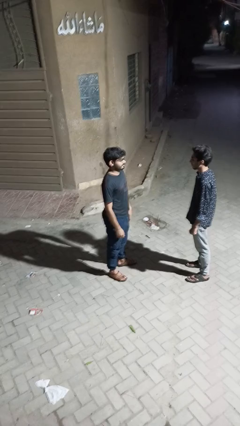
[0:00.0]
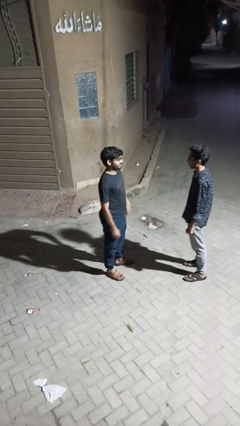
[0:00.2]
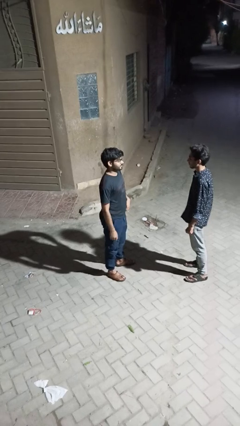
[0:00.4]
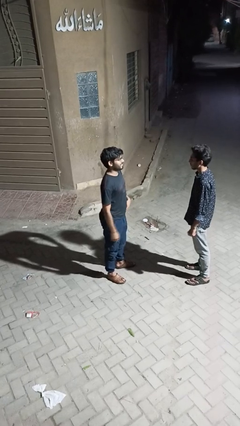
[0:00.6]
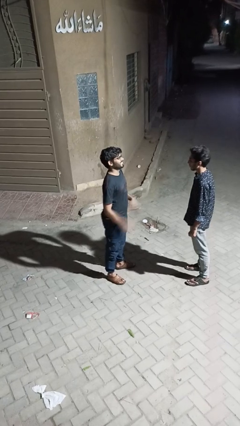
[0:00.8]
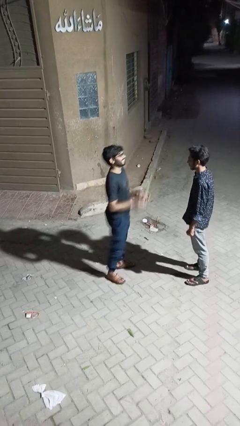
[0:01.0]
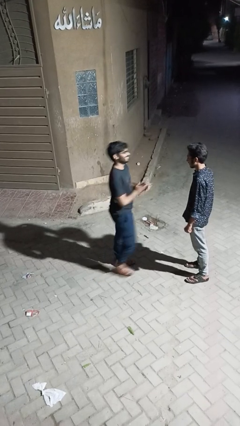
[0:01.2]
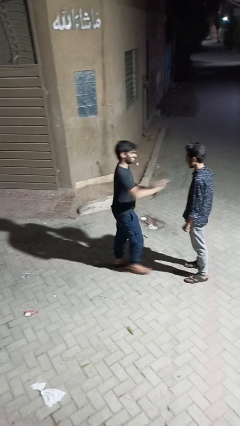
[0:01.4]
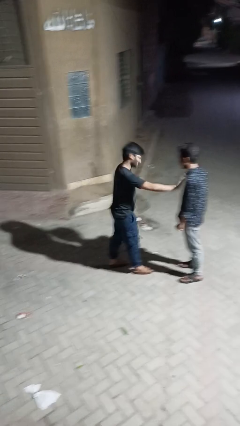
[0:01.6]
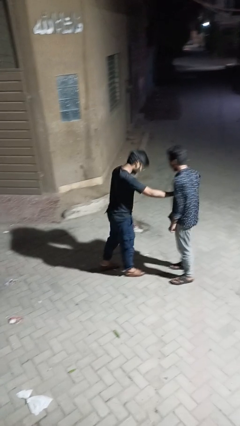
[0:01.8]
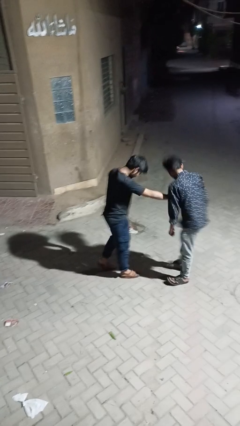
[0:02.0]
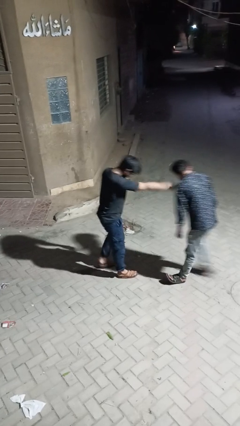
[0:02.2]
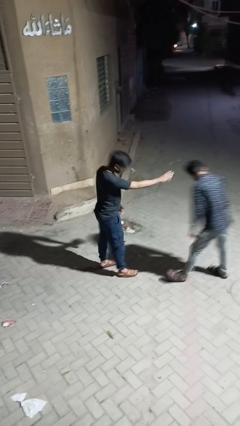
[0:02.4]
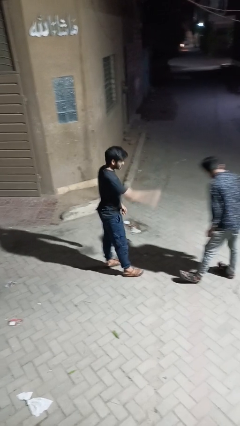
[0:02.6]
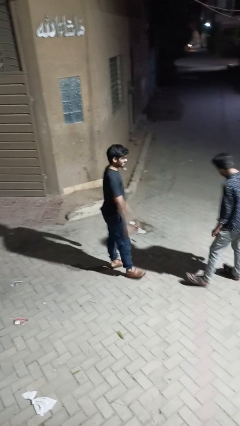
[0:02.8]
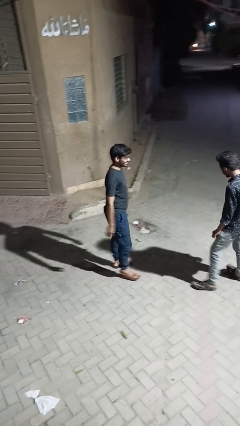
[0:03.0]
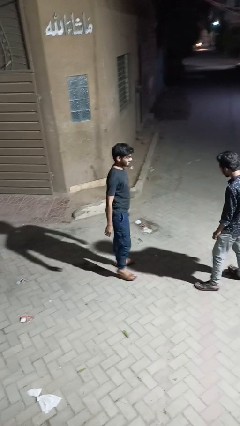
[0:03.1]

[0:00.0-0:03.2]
person shoves person

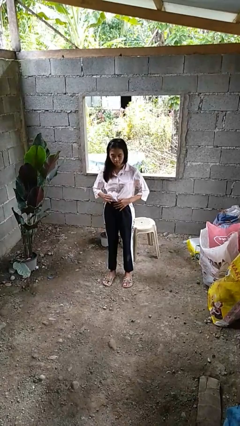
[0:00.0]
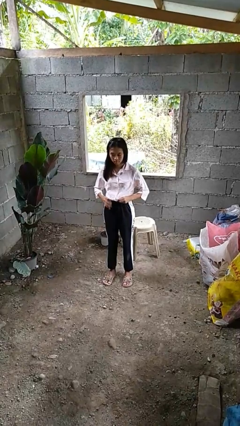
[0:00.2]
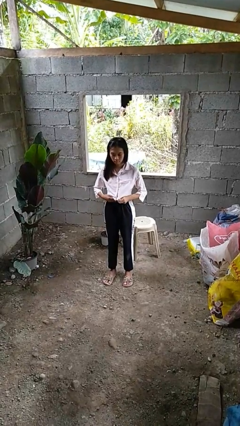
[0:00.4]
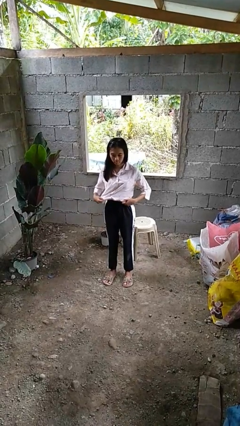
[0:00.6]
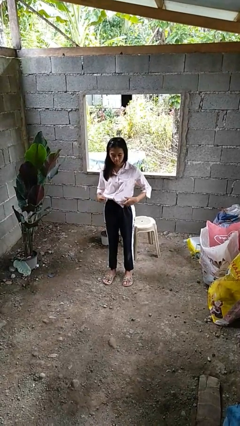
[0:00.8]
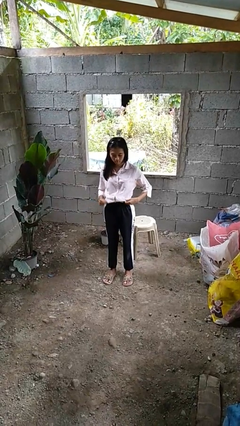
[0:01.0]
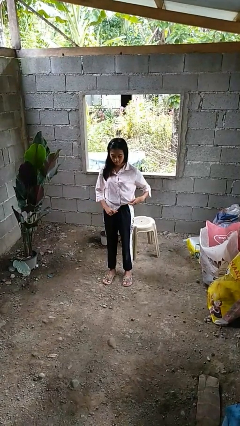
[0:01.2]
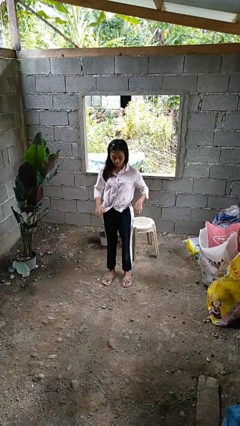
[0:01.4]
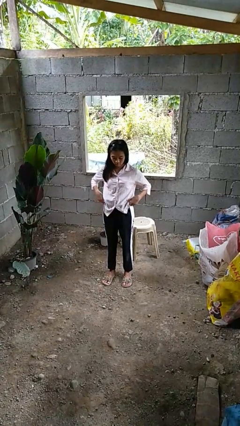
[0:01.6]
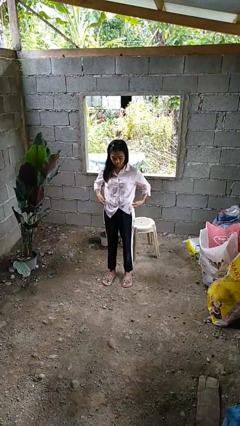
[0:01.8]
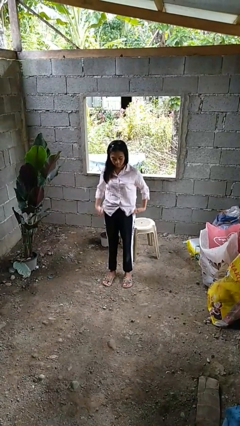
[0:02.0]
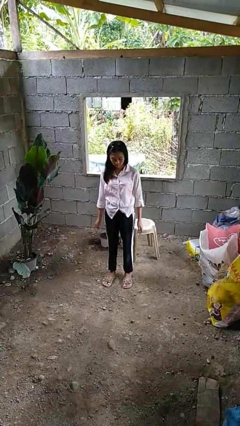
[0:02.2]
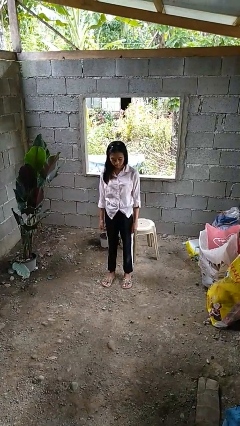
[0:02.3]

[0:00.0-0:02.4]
person untucks shirt

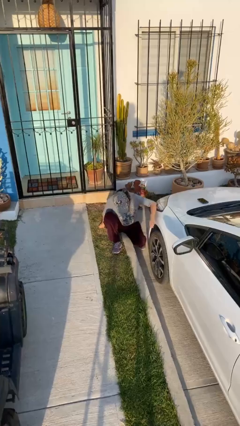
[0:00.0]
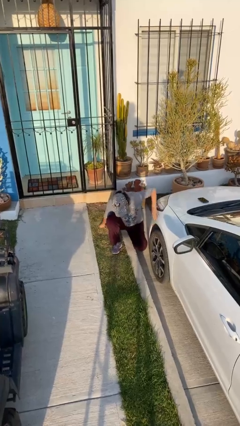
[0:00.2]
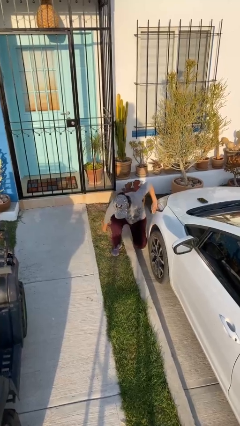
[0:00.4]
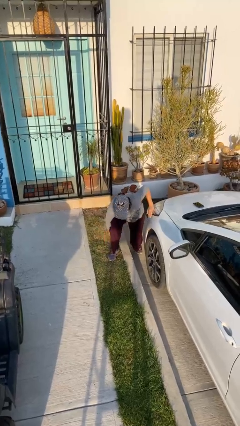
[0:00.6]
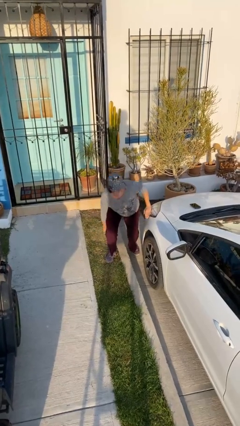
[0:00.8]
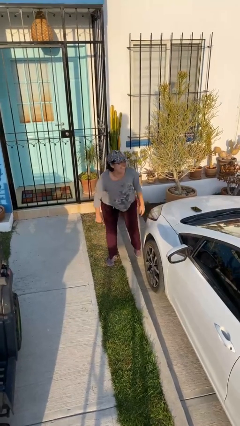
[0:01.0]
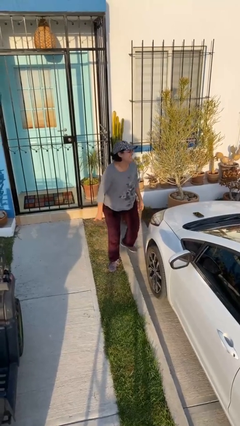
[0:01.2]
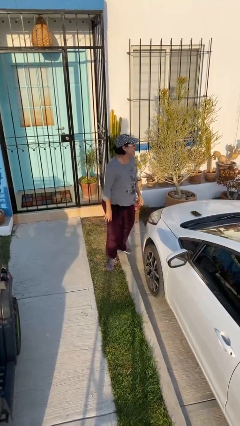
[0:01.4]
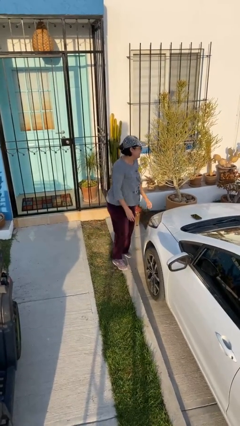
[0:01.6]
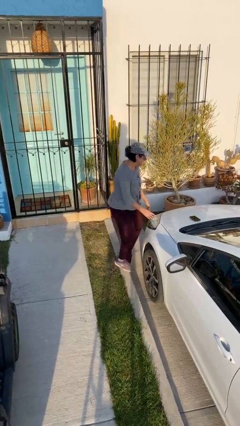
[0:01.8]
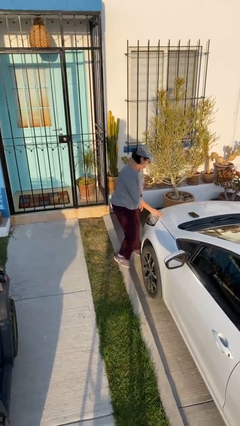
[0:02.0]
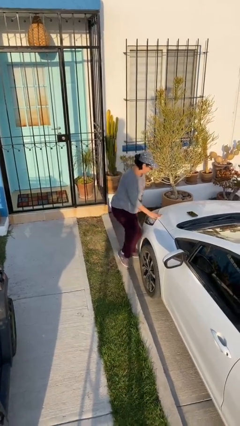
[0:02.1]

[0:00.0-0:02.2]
person stands up

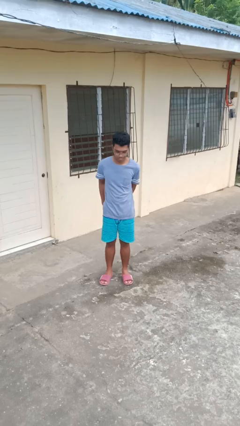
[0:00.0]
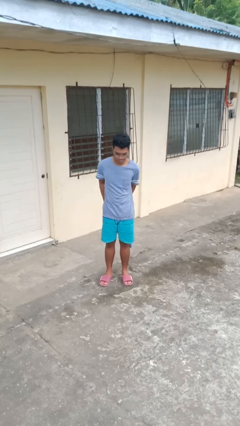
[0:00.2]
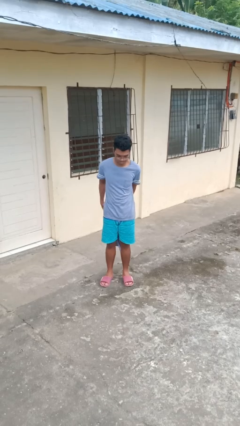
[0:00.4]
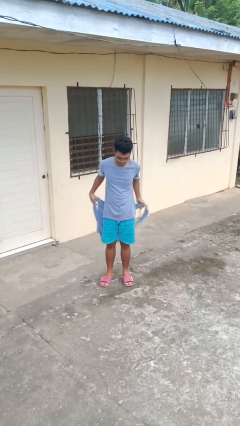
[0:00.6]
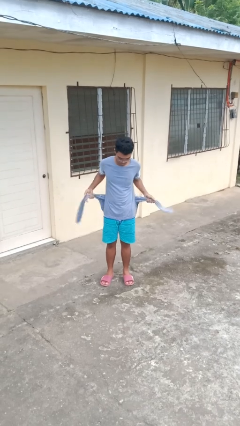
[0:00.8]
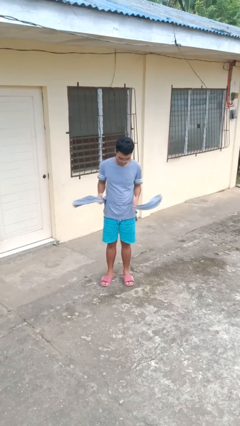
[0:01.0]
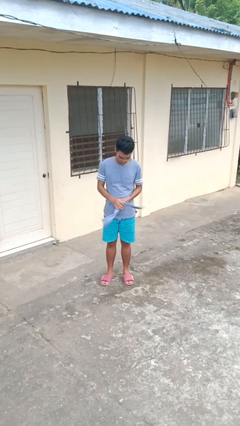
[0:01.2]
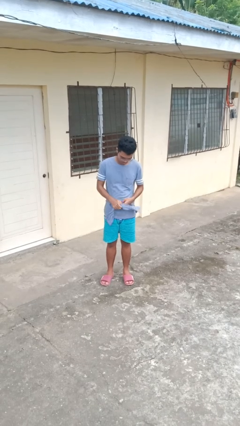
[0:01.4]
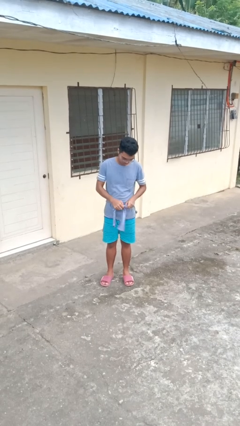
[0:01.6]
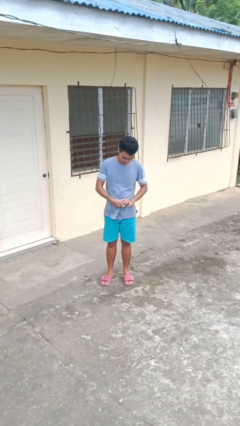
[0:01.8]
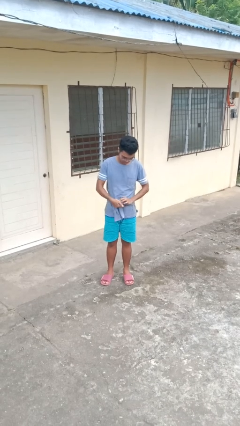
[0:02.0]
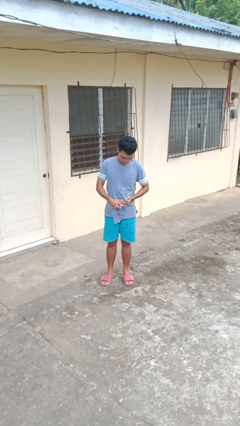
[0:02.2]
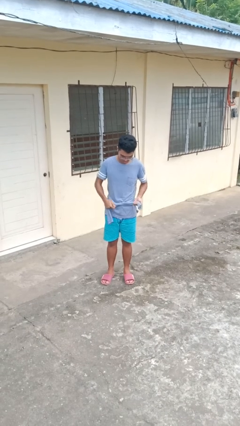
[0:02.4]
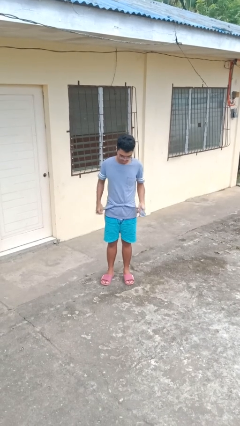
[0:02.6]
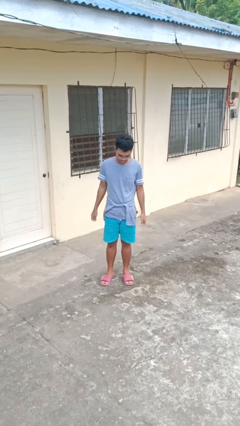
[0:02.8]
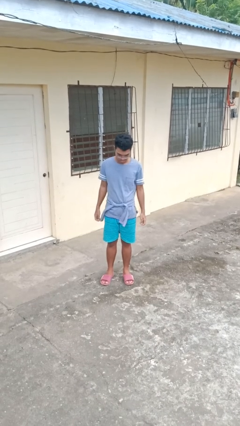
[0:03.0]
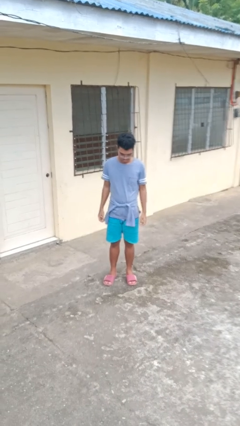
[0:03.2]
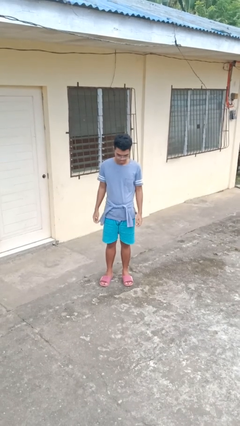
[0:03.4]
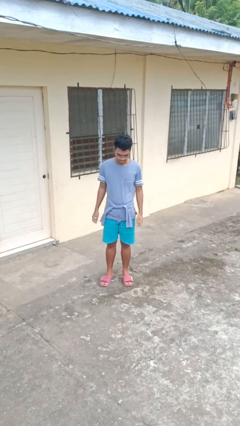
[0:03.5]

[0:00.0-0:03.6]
person ties jacket around waist

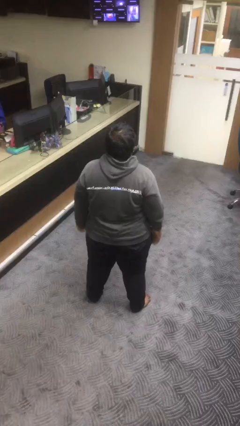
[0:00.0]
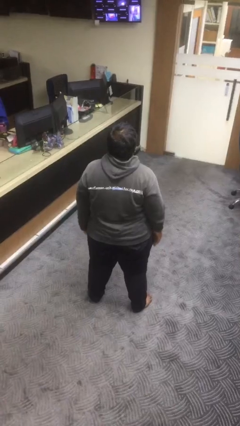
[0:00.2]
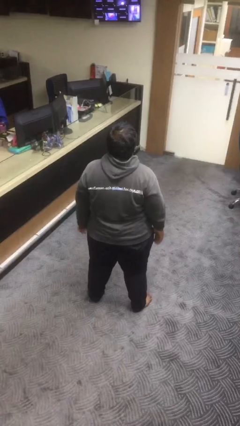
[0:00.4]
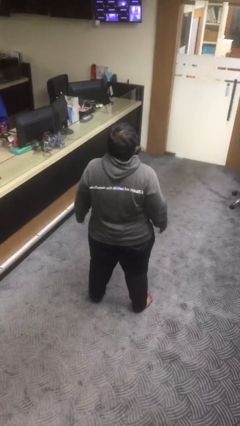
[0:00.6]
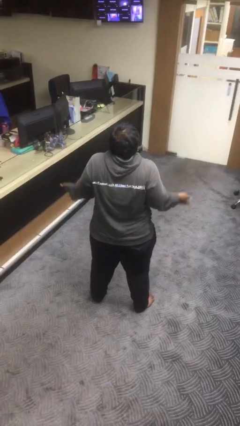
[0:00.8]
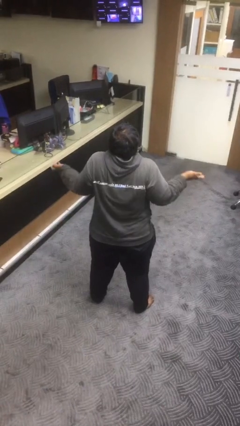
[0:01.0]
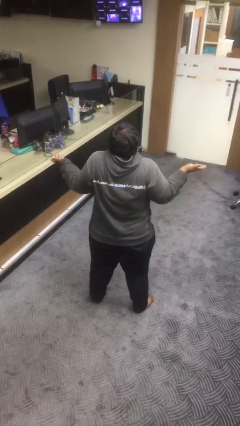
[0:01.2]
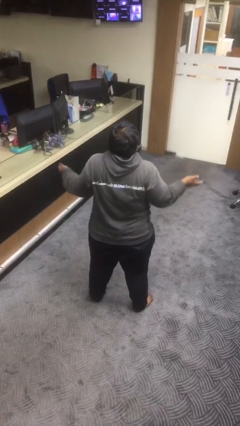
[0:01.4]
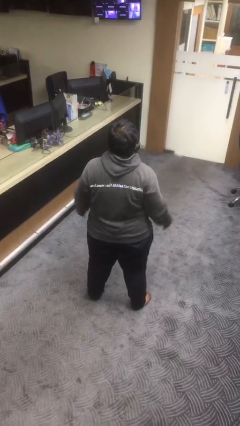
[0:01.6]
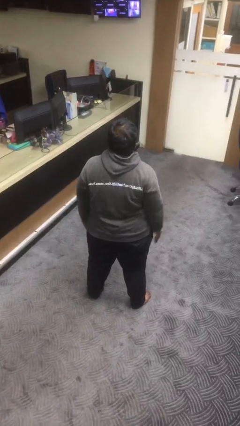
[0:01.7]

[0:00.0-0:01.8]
person shrugs

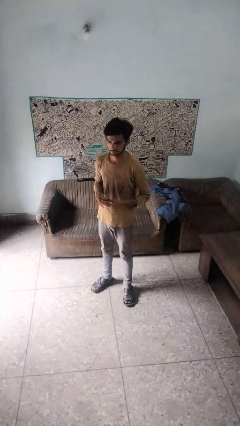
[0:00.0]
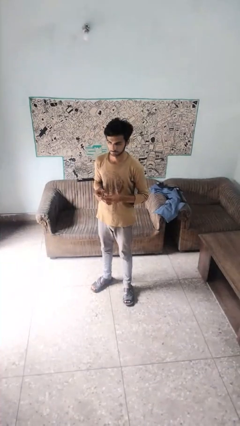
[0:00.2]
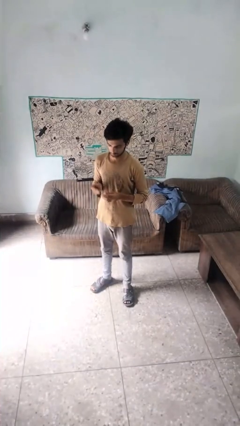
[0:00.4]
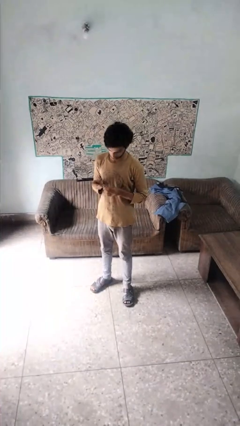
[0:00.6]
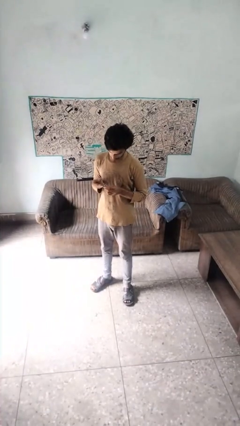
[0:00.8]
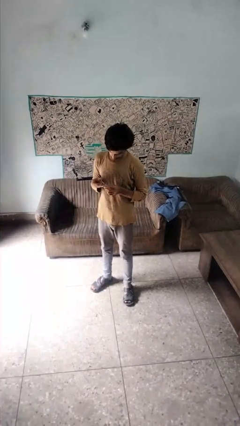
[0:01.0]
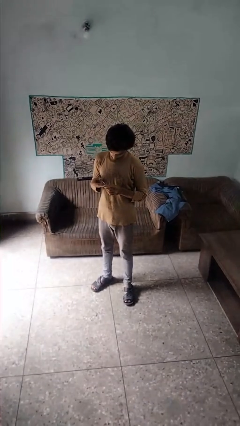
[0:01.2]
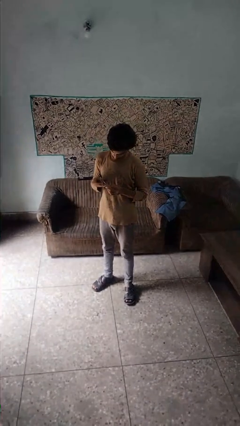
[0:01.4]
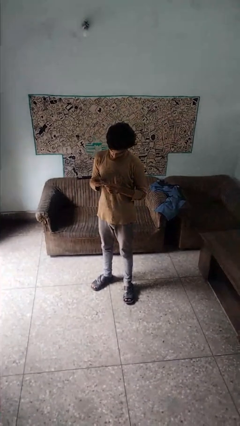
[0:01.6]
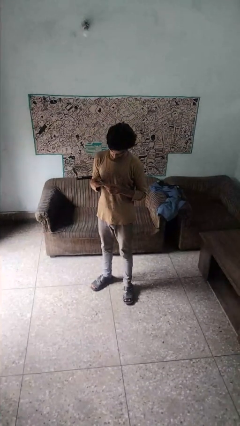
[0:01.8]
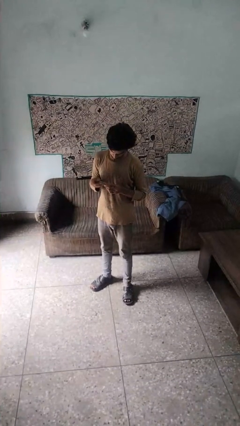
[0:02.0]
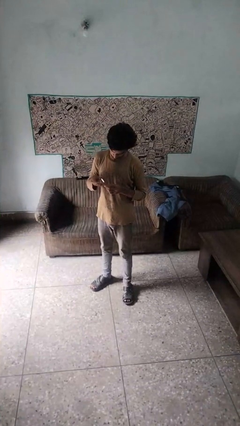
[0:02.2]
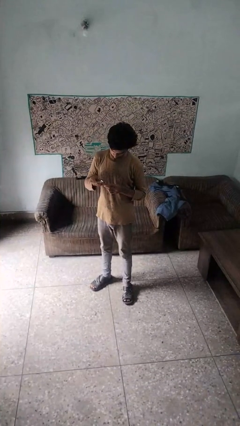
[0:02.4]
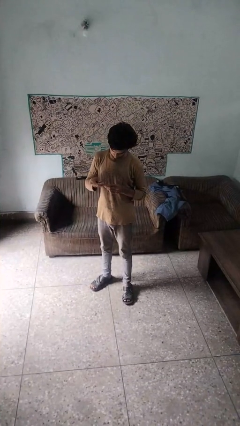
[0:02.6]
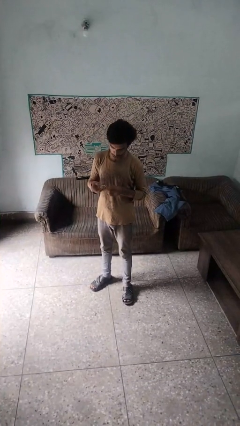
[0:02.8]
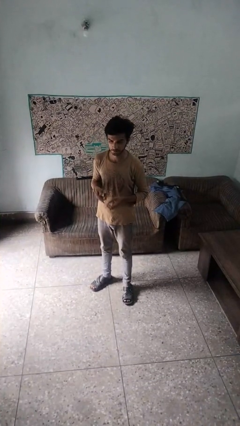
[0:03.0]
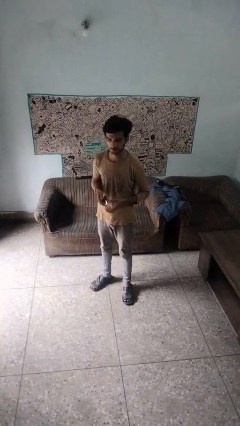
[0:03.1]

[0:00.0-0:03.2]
person clips fingernails

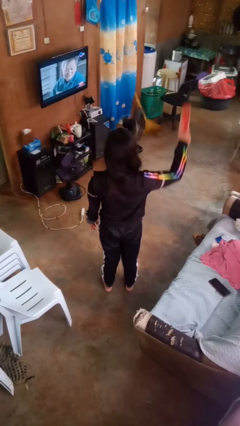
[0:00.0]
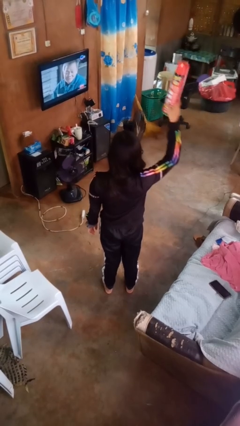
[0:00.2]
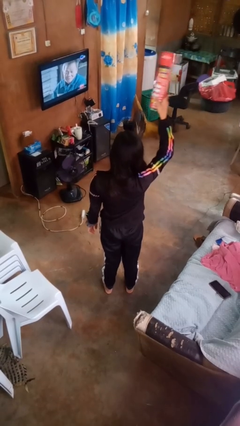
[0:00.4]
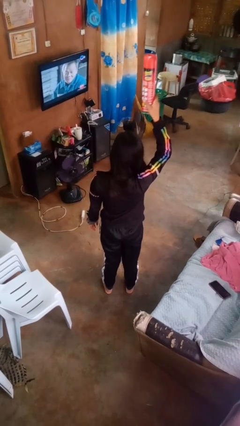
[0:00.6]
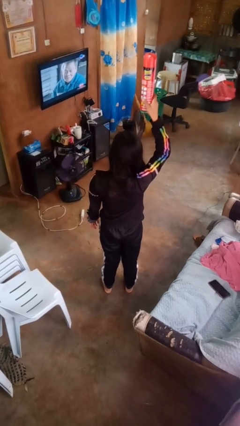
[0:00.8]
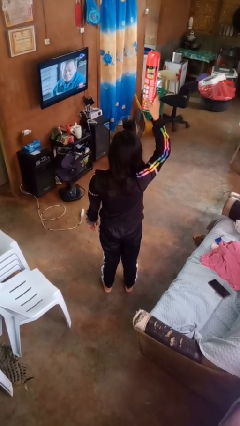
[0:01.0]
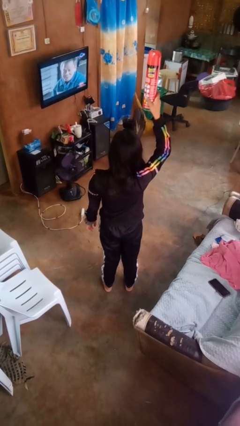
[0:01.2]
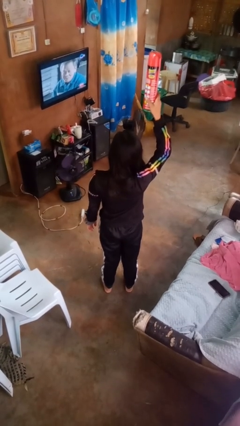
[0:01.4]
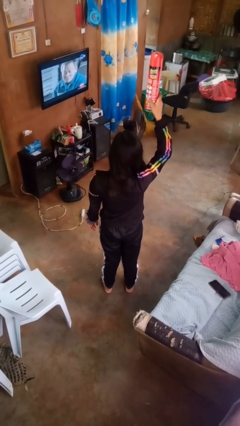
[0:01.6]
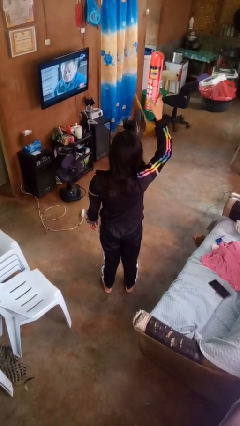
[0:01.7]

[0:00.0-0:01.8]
person holds object above head
